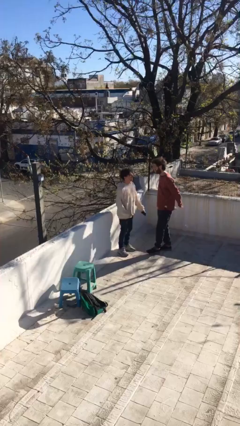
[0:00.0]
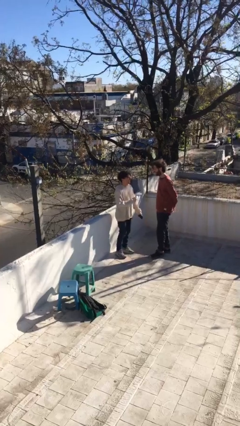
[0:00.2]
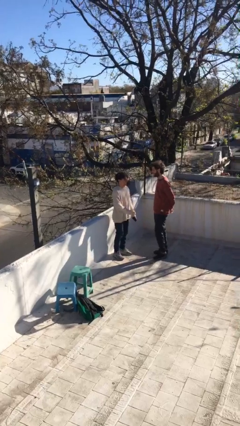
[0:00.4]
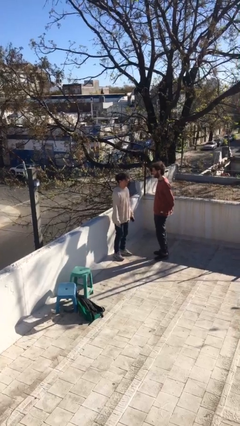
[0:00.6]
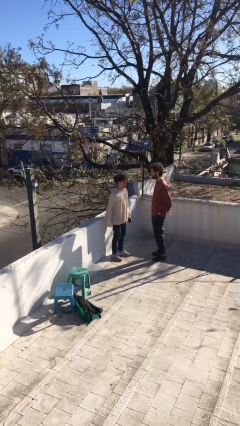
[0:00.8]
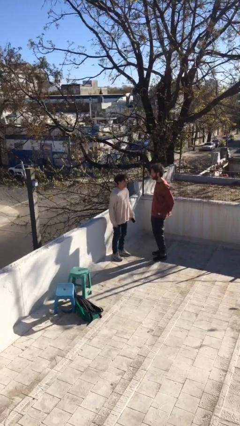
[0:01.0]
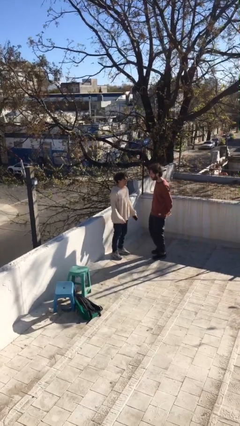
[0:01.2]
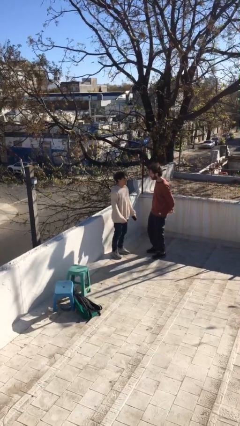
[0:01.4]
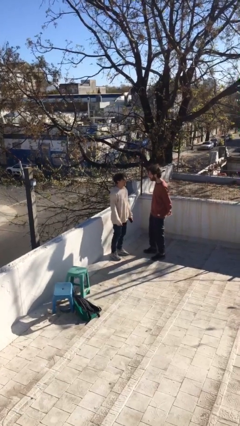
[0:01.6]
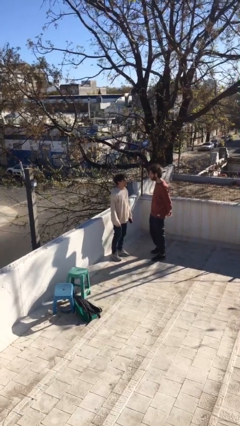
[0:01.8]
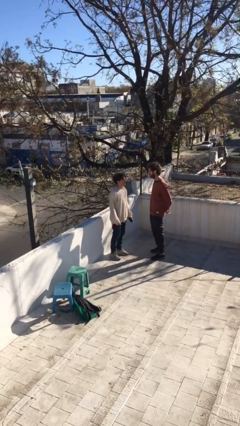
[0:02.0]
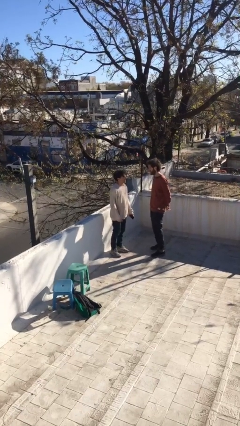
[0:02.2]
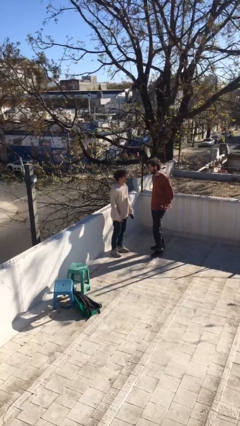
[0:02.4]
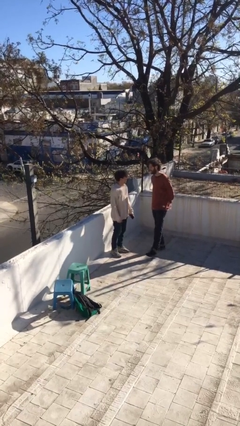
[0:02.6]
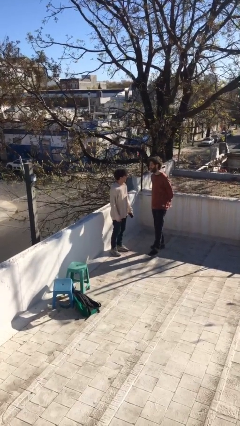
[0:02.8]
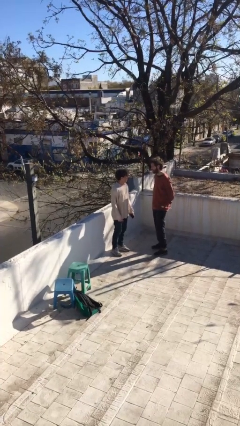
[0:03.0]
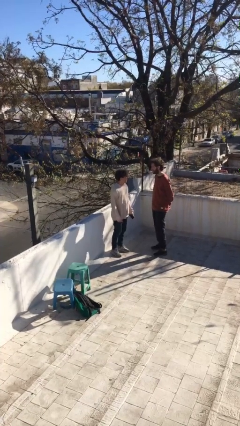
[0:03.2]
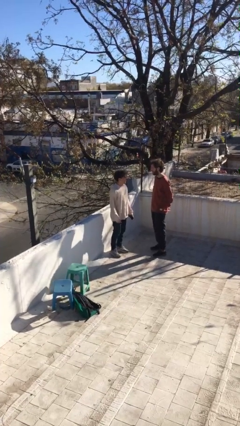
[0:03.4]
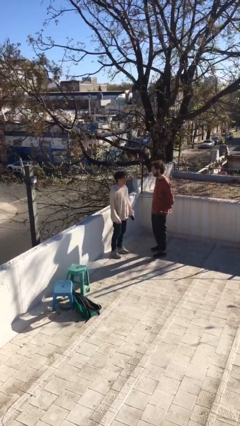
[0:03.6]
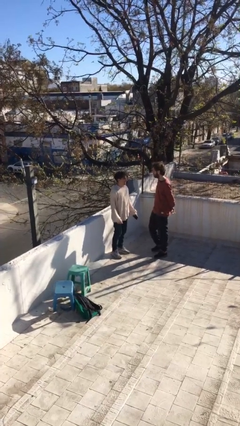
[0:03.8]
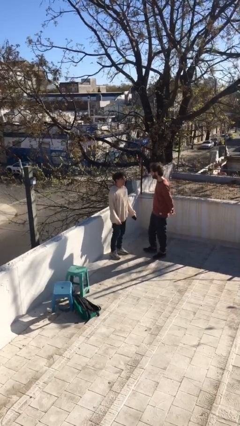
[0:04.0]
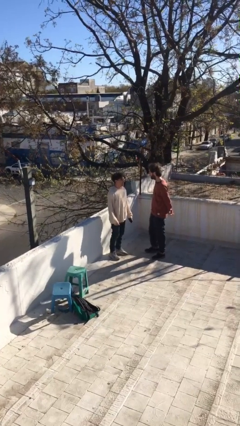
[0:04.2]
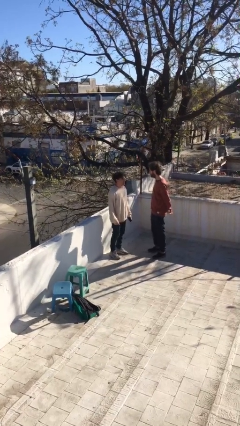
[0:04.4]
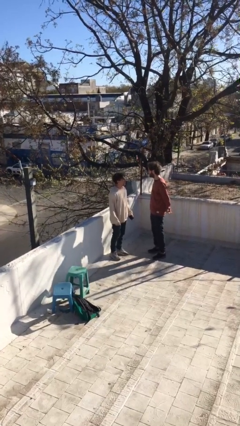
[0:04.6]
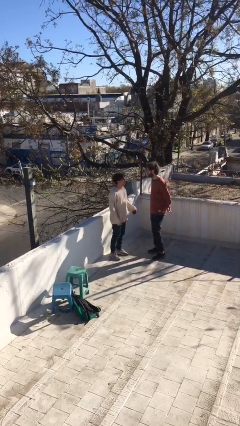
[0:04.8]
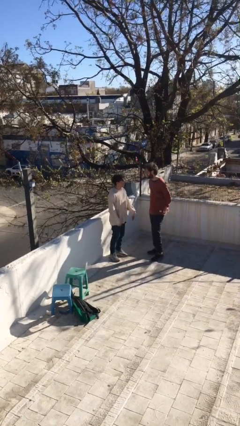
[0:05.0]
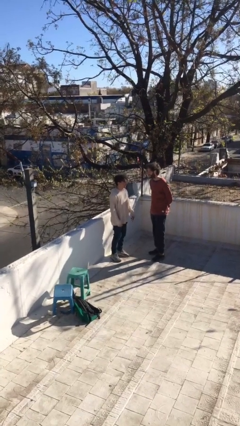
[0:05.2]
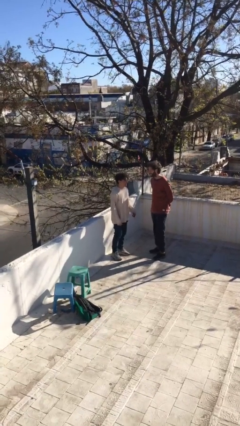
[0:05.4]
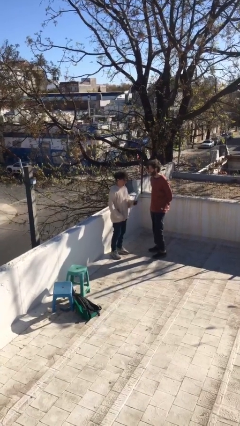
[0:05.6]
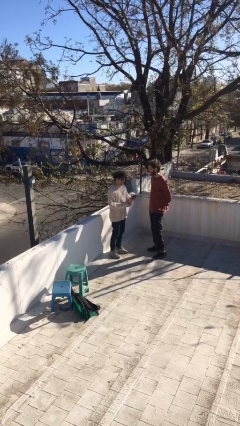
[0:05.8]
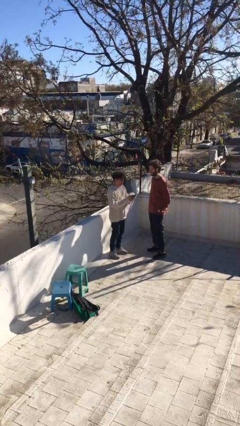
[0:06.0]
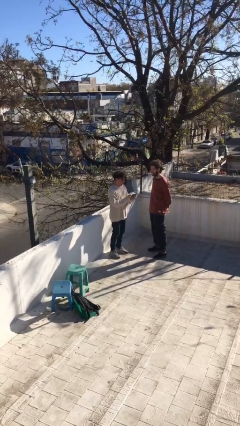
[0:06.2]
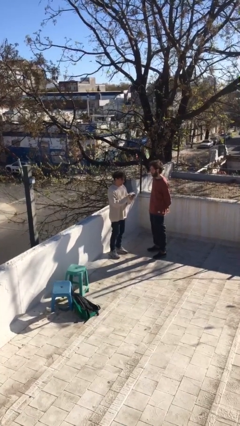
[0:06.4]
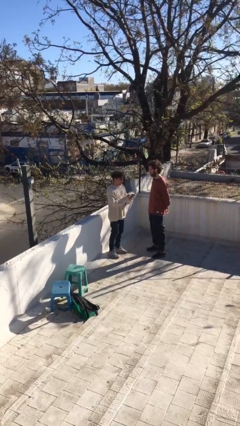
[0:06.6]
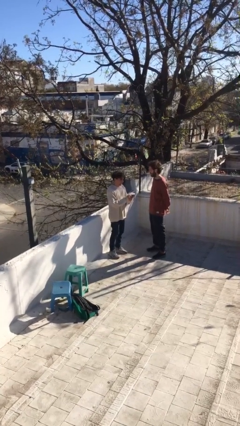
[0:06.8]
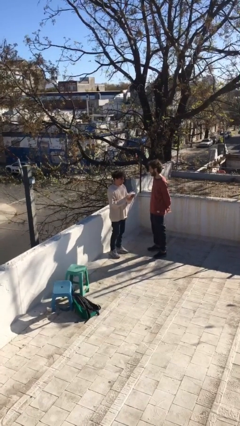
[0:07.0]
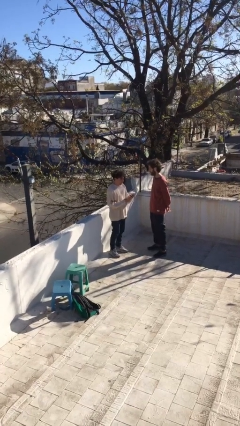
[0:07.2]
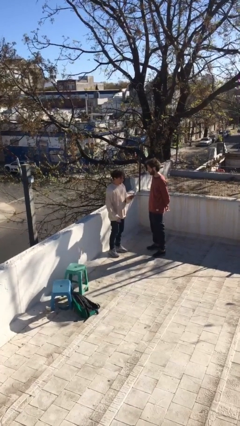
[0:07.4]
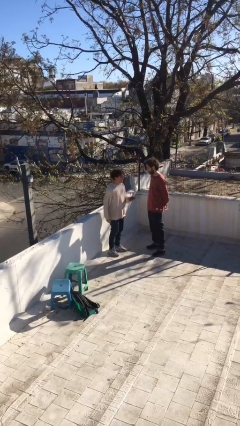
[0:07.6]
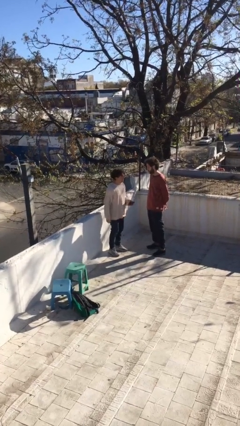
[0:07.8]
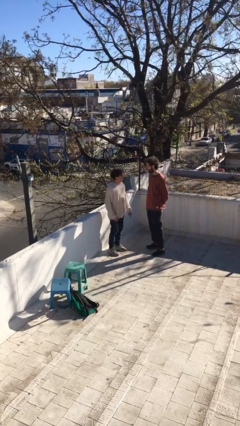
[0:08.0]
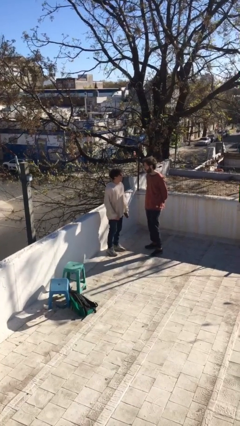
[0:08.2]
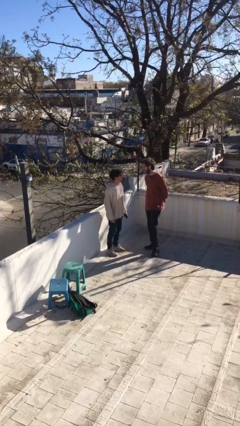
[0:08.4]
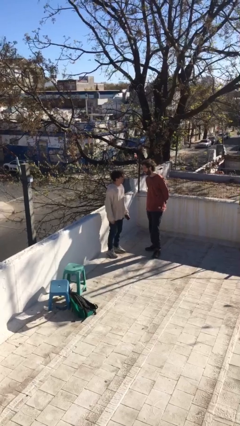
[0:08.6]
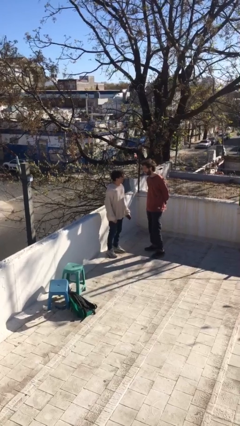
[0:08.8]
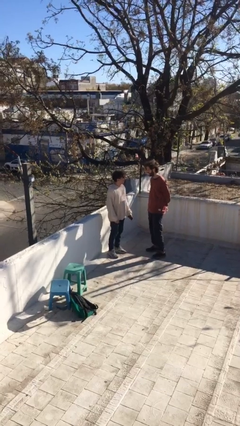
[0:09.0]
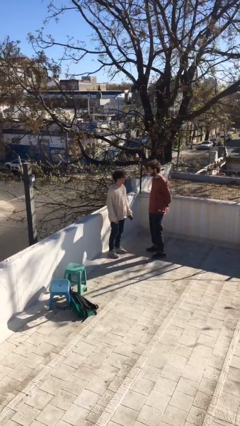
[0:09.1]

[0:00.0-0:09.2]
person talks to person

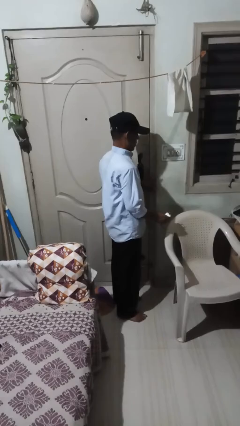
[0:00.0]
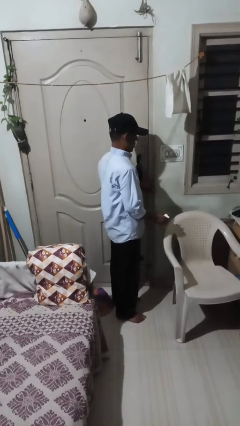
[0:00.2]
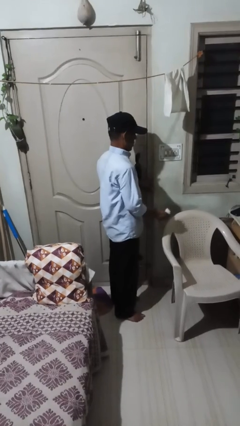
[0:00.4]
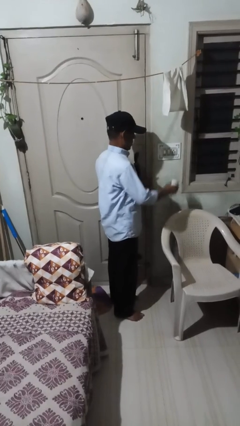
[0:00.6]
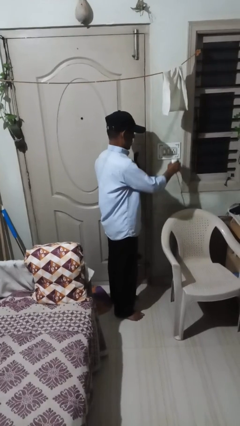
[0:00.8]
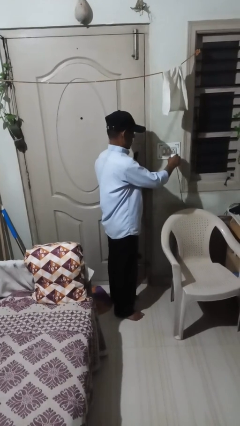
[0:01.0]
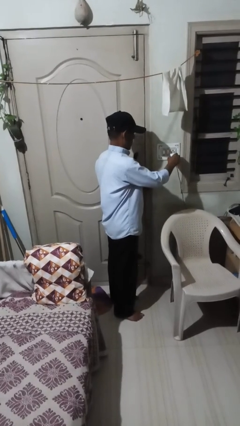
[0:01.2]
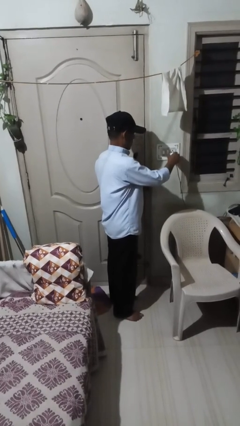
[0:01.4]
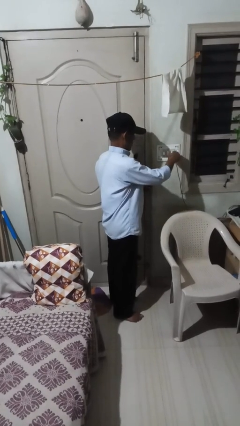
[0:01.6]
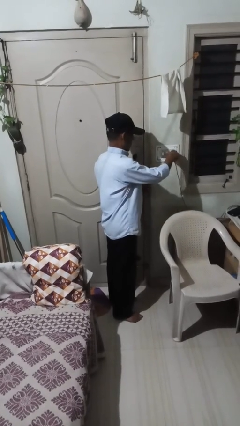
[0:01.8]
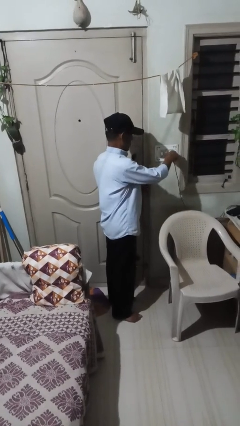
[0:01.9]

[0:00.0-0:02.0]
person plugs into electrical socket

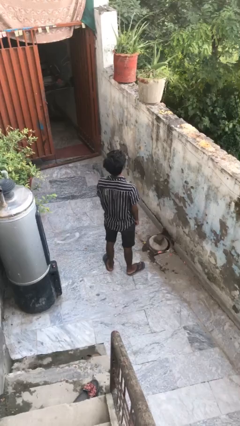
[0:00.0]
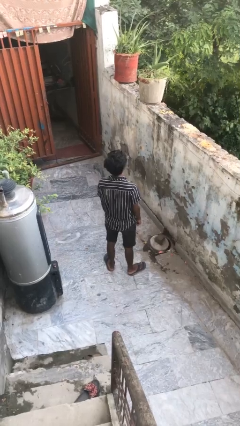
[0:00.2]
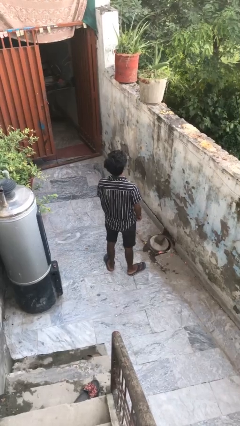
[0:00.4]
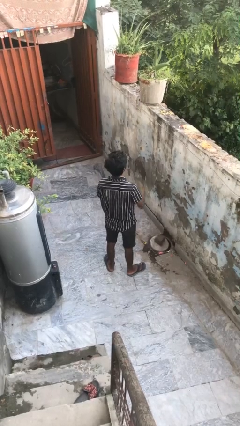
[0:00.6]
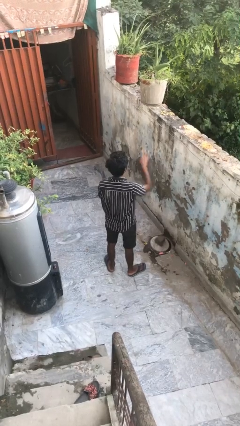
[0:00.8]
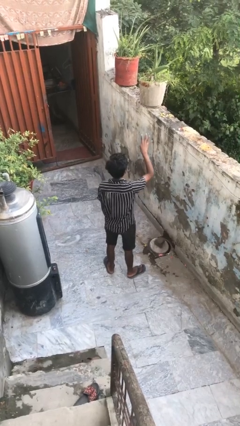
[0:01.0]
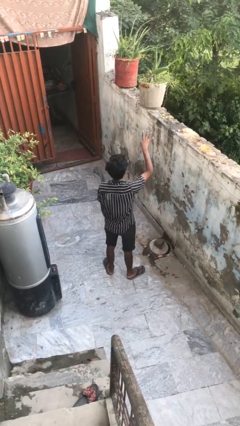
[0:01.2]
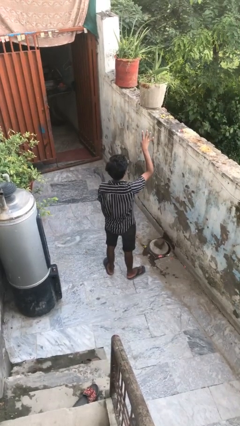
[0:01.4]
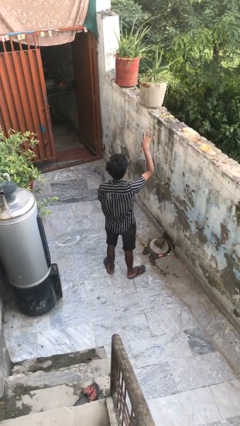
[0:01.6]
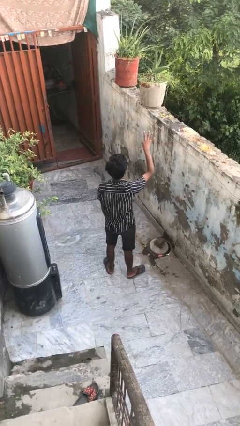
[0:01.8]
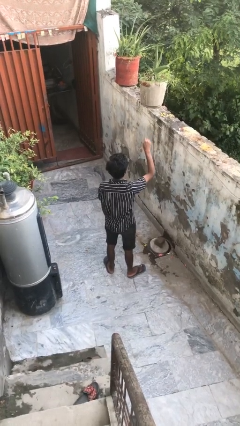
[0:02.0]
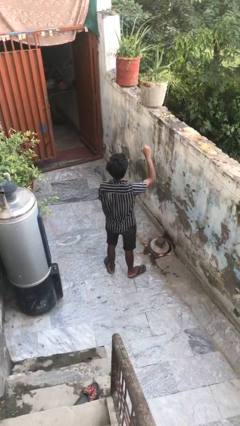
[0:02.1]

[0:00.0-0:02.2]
person gestures number four

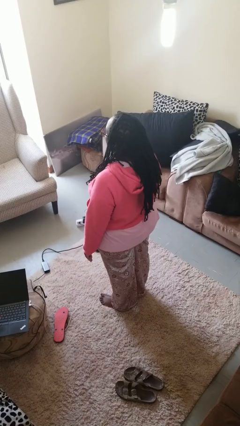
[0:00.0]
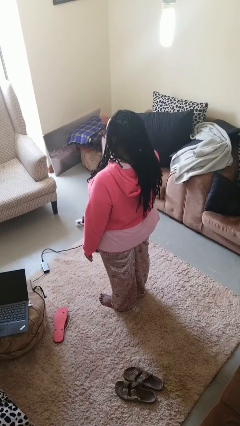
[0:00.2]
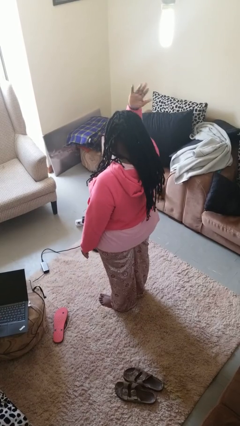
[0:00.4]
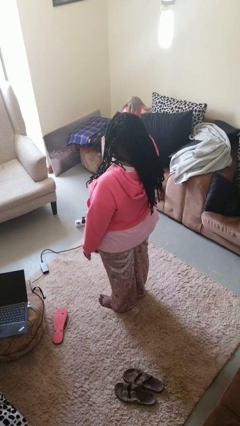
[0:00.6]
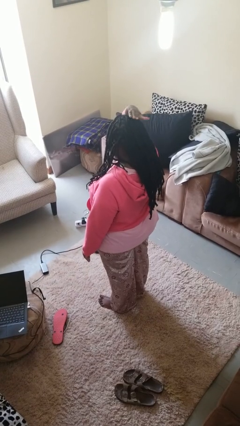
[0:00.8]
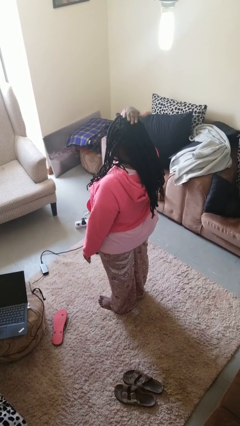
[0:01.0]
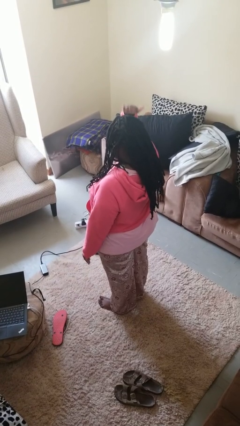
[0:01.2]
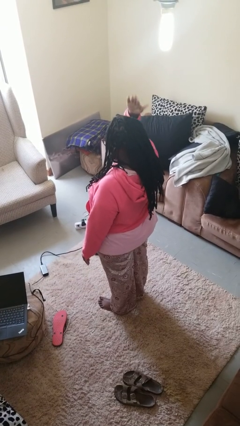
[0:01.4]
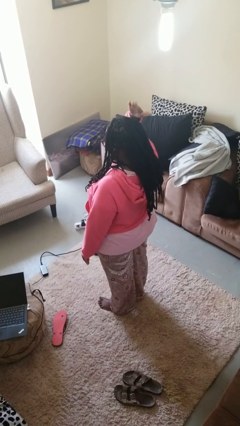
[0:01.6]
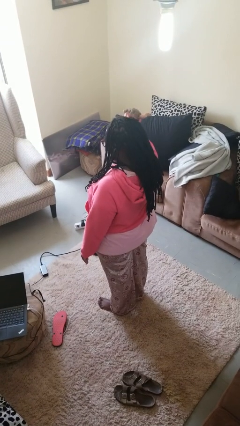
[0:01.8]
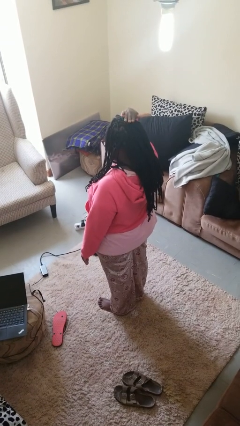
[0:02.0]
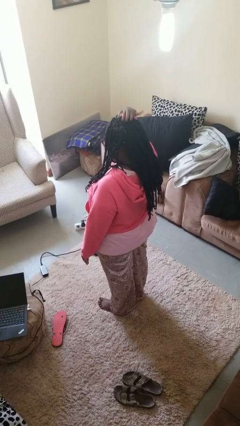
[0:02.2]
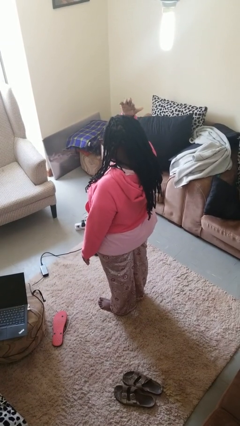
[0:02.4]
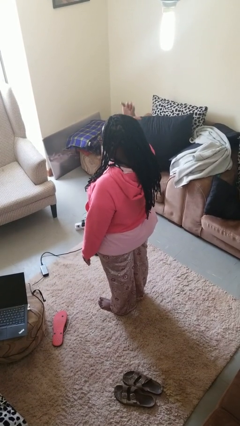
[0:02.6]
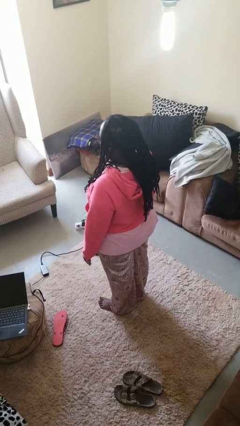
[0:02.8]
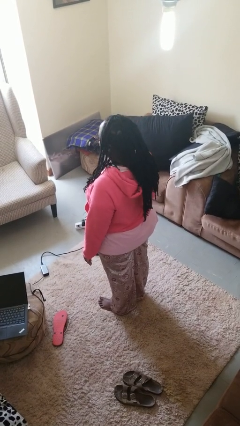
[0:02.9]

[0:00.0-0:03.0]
person pats head

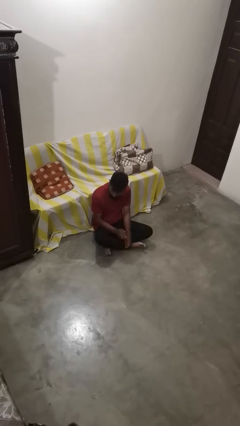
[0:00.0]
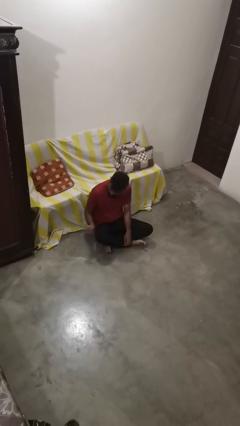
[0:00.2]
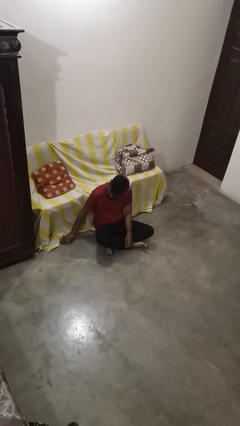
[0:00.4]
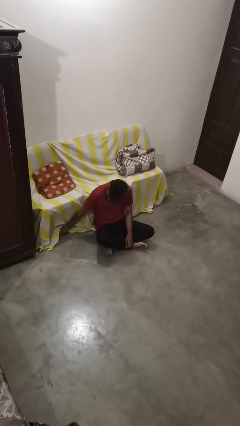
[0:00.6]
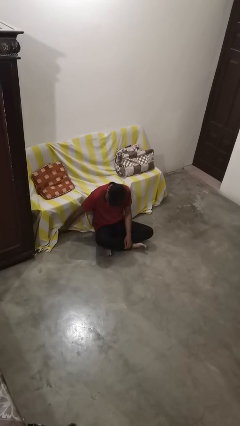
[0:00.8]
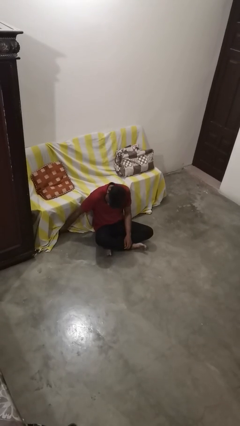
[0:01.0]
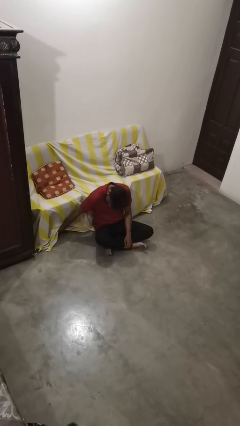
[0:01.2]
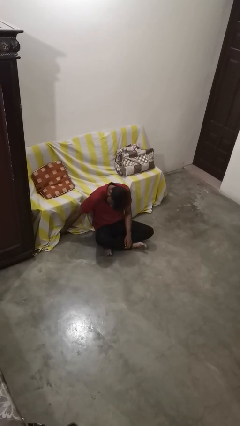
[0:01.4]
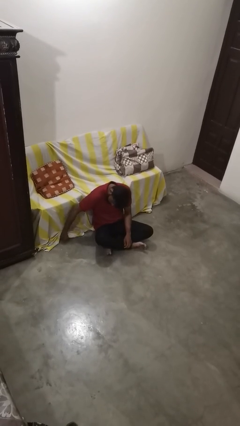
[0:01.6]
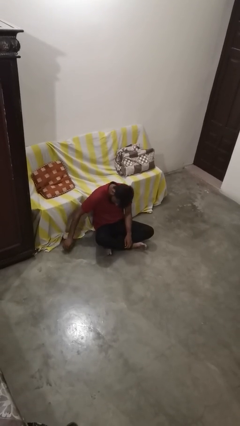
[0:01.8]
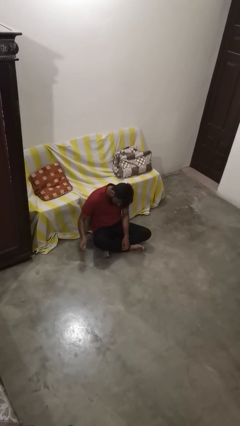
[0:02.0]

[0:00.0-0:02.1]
person searches under couch
